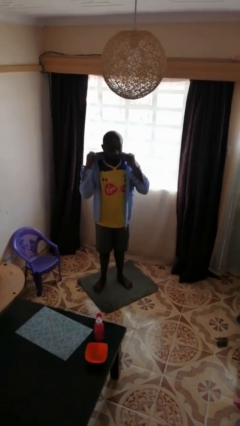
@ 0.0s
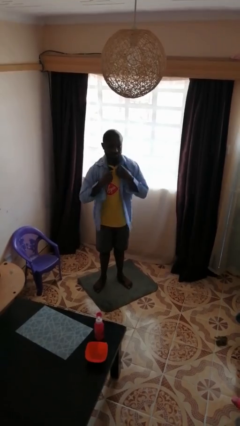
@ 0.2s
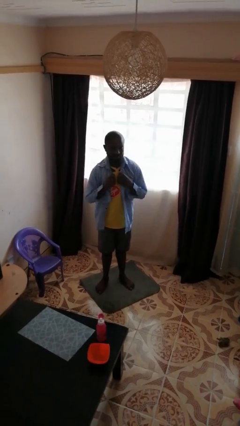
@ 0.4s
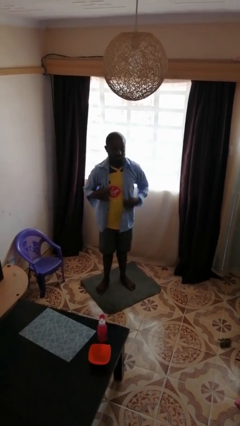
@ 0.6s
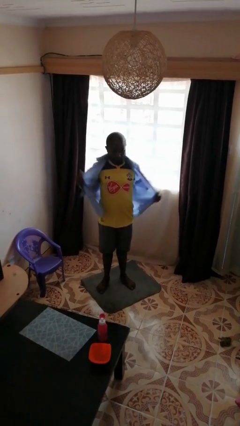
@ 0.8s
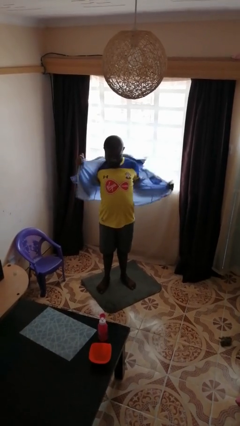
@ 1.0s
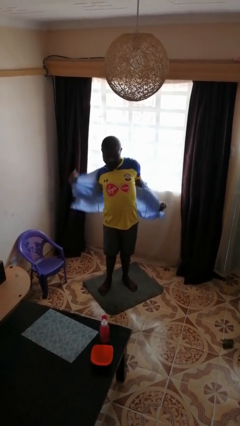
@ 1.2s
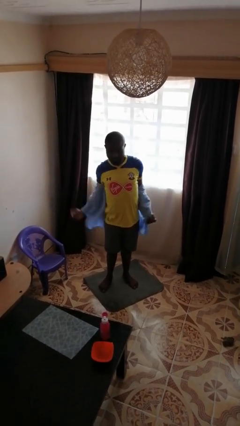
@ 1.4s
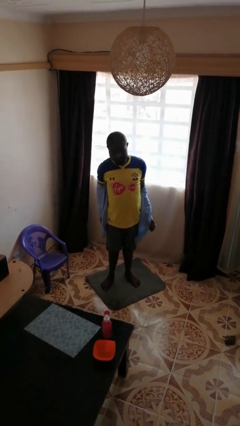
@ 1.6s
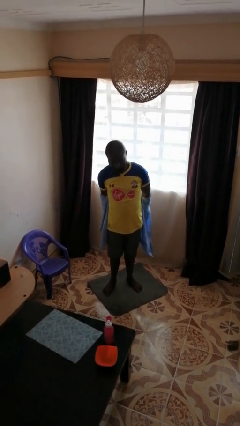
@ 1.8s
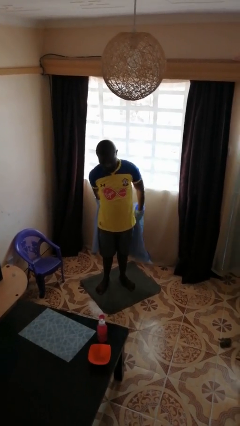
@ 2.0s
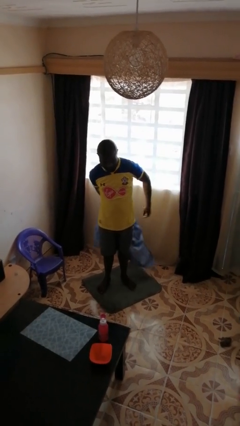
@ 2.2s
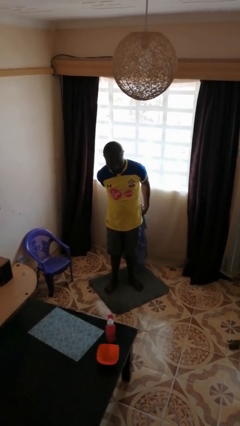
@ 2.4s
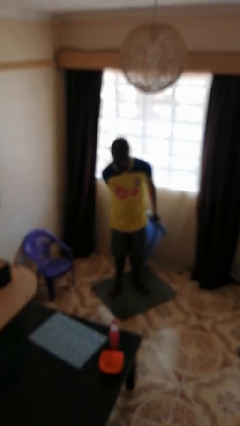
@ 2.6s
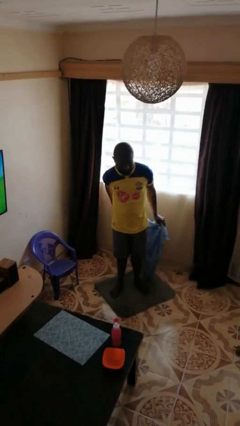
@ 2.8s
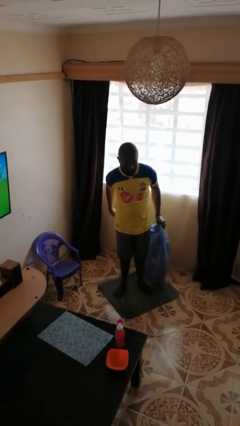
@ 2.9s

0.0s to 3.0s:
person takes off shirt

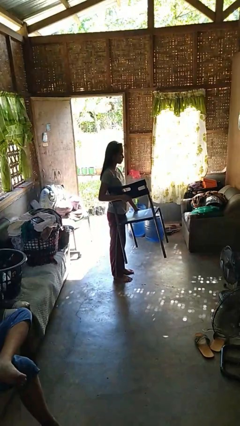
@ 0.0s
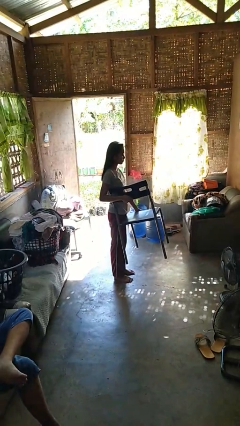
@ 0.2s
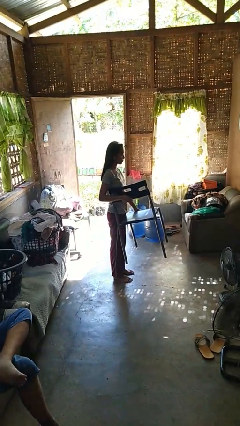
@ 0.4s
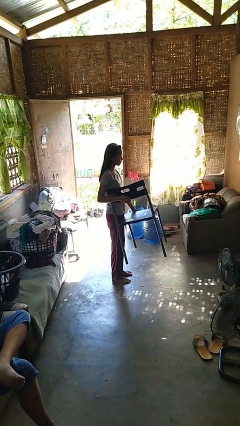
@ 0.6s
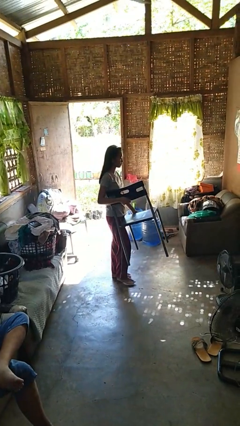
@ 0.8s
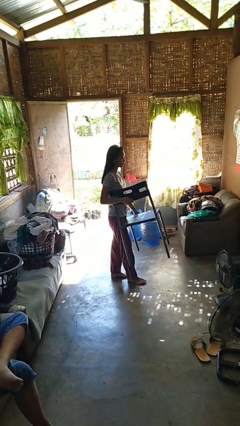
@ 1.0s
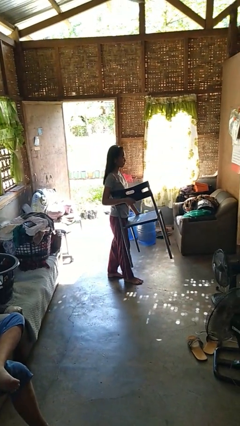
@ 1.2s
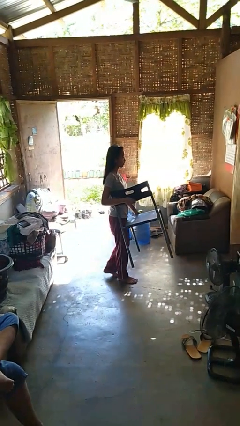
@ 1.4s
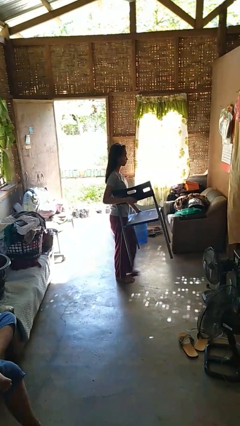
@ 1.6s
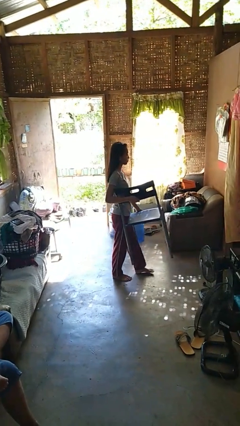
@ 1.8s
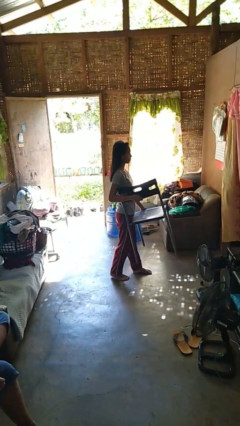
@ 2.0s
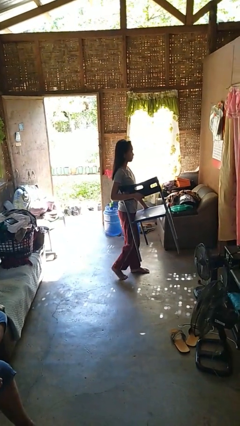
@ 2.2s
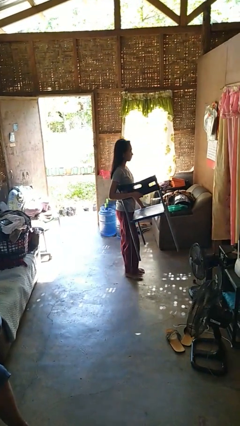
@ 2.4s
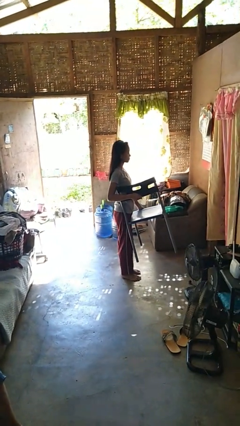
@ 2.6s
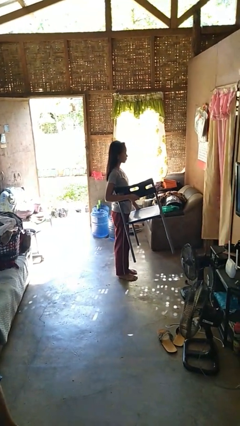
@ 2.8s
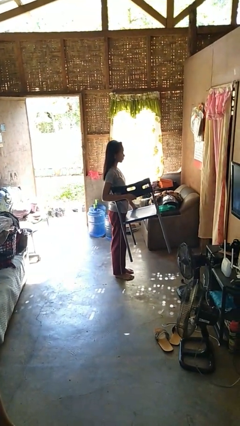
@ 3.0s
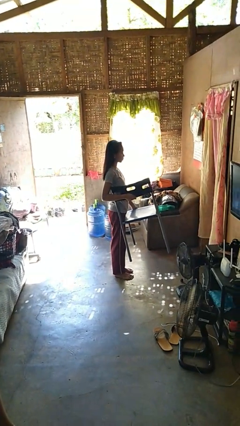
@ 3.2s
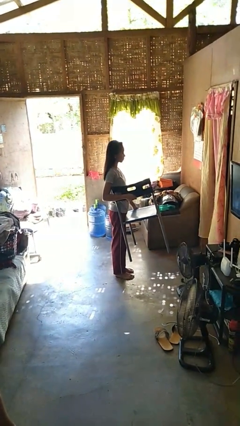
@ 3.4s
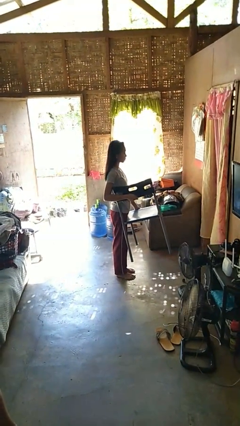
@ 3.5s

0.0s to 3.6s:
person carries furniture

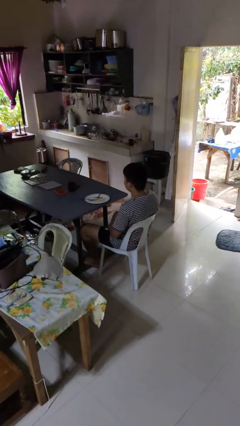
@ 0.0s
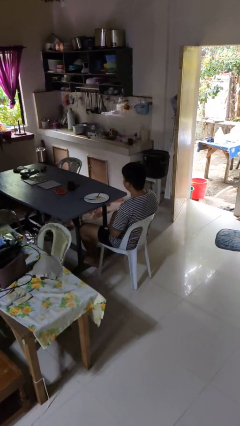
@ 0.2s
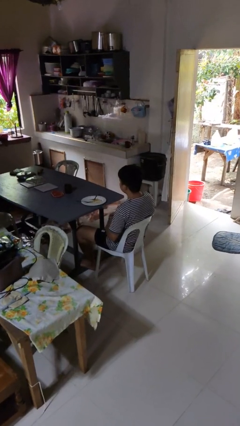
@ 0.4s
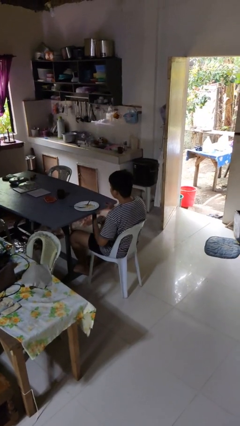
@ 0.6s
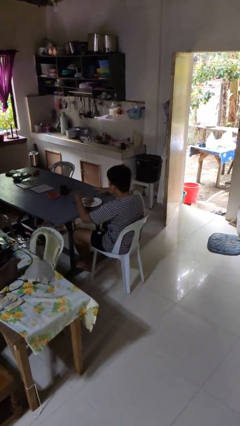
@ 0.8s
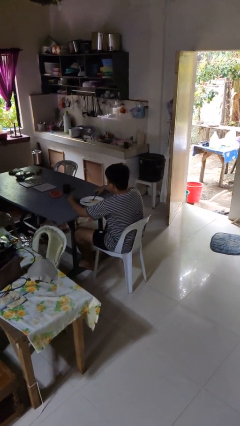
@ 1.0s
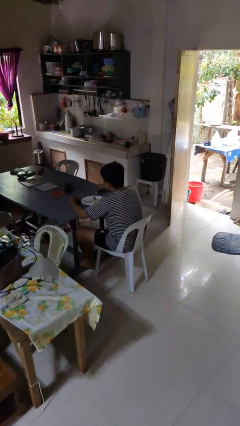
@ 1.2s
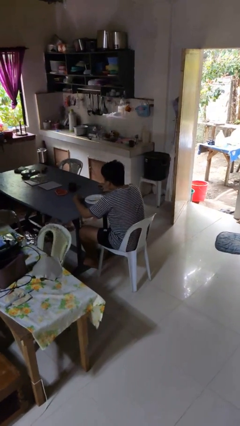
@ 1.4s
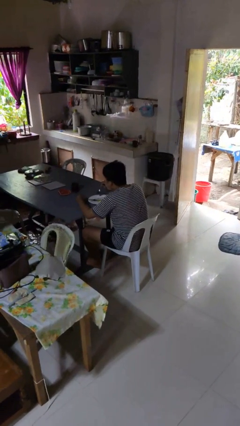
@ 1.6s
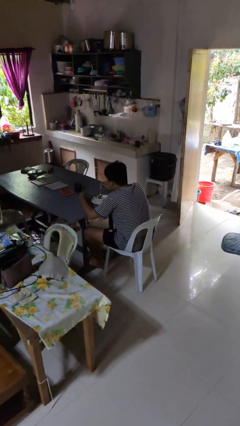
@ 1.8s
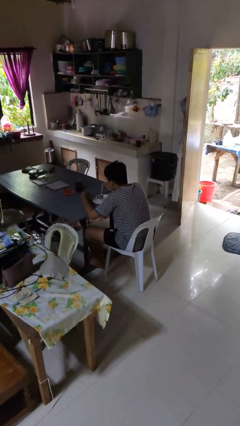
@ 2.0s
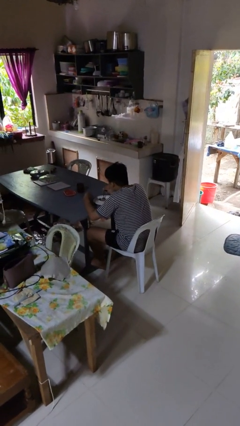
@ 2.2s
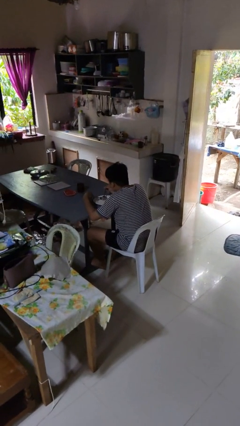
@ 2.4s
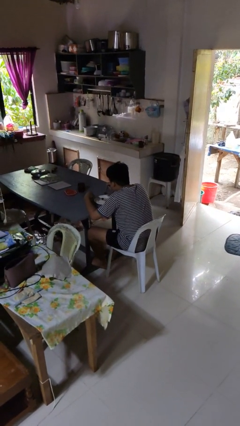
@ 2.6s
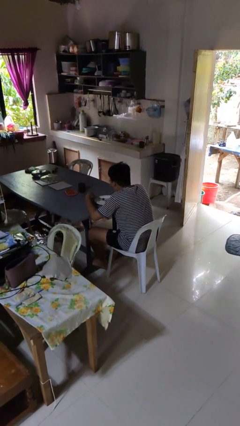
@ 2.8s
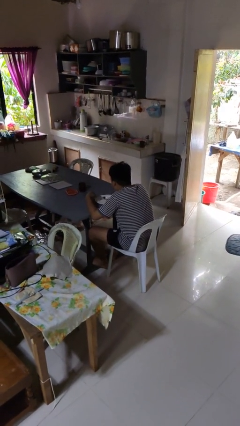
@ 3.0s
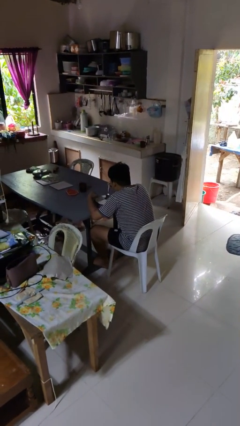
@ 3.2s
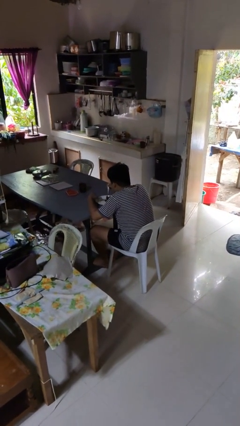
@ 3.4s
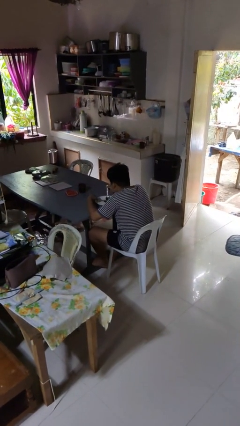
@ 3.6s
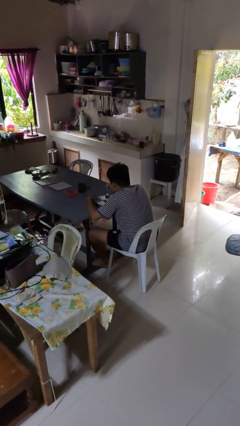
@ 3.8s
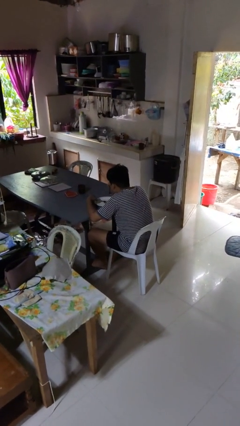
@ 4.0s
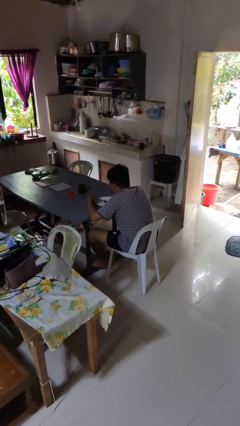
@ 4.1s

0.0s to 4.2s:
person eats with utensil

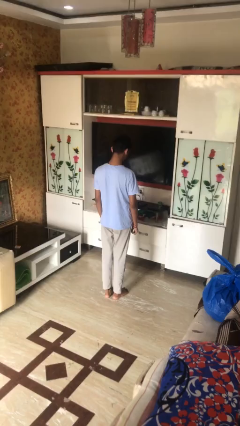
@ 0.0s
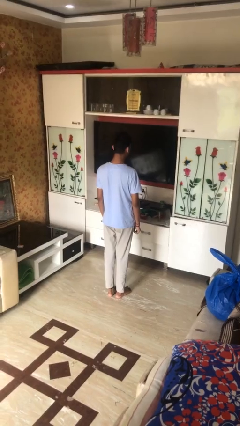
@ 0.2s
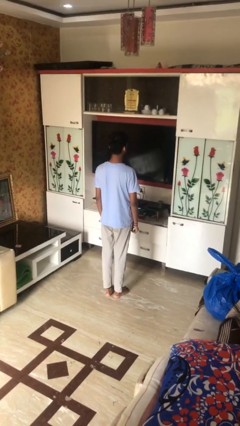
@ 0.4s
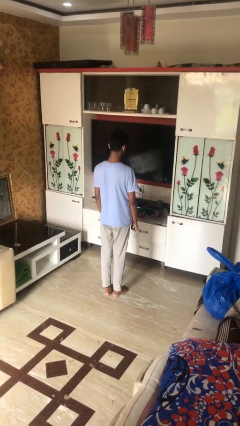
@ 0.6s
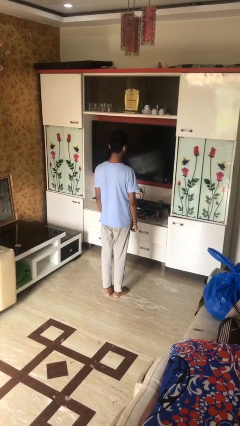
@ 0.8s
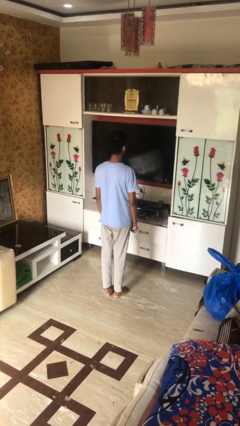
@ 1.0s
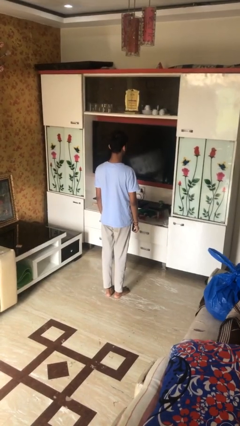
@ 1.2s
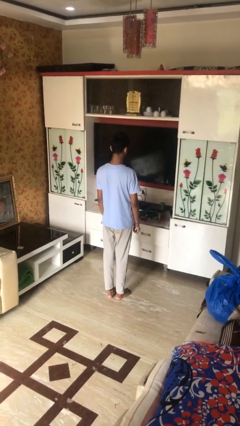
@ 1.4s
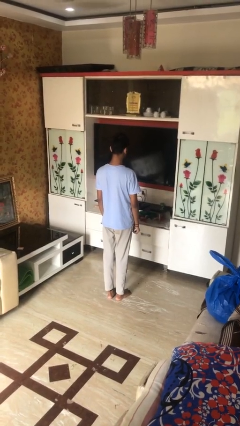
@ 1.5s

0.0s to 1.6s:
person nods head

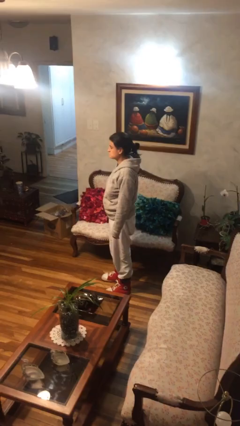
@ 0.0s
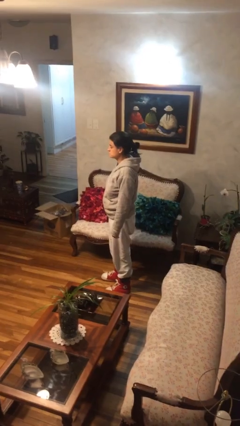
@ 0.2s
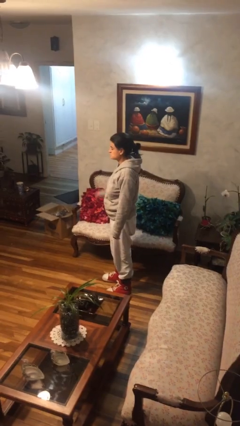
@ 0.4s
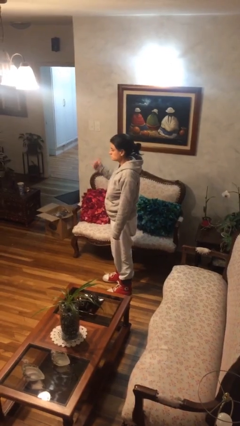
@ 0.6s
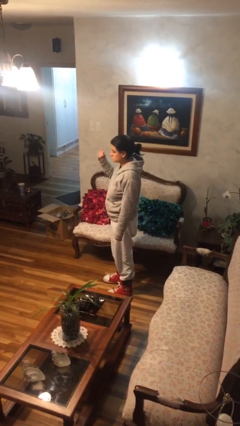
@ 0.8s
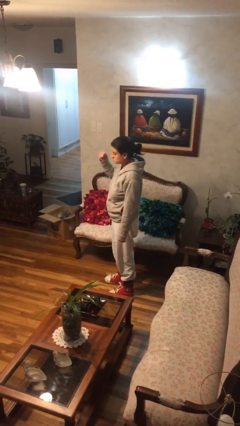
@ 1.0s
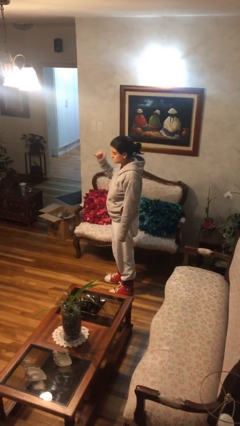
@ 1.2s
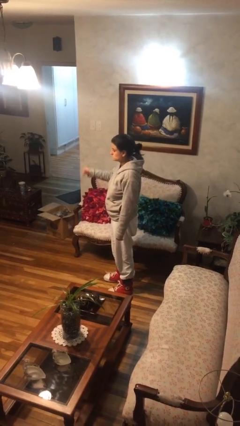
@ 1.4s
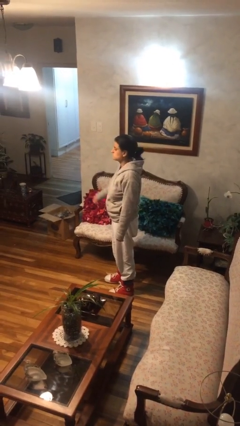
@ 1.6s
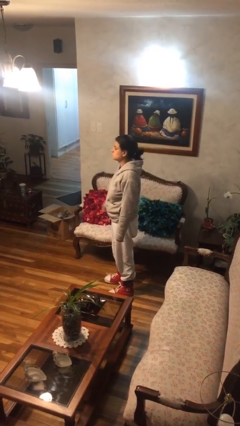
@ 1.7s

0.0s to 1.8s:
person gestures hang loose
